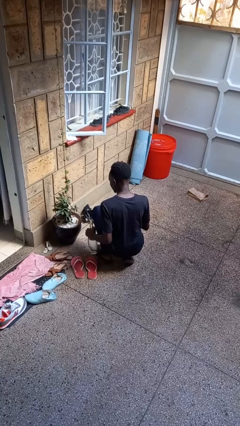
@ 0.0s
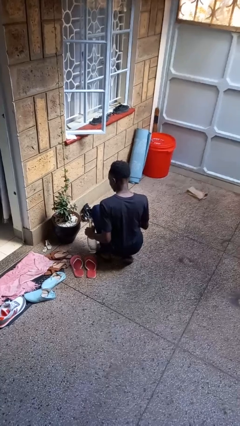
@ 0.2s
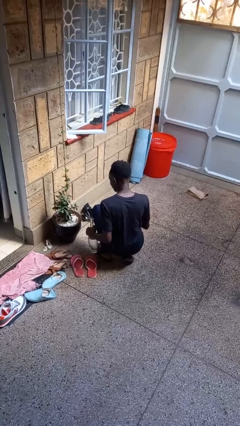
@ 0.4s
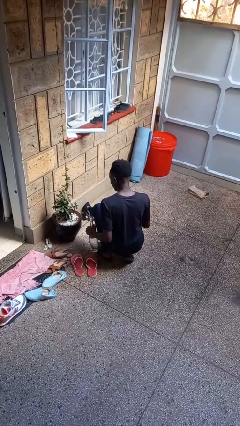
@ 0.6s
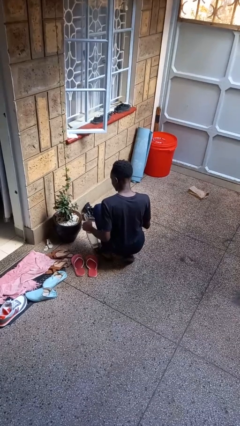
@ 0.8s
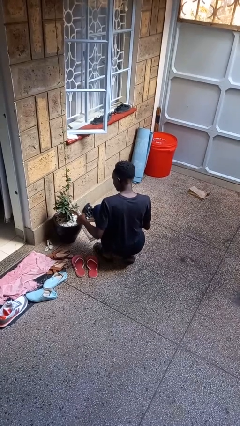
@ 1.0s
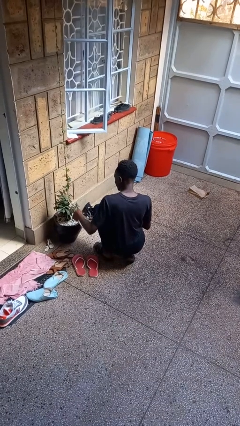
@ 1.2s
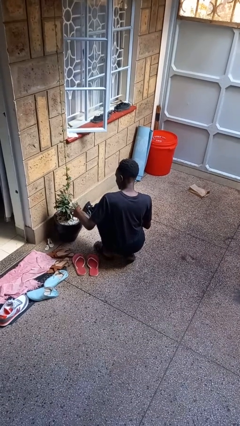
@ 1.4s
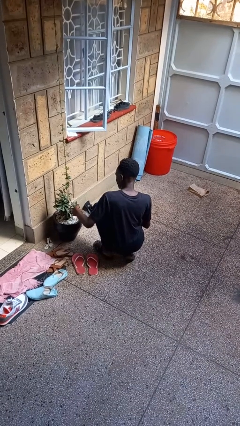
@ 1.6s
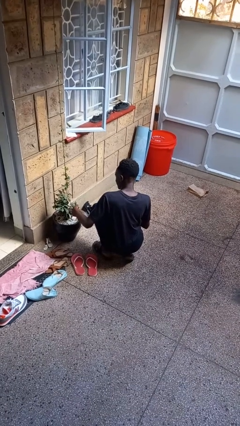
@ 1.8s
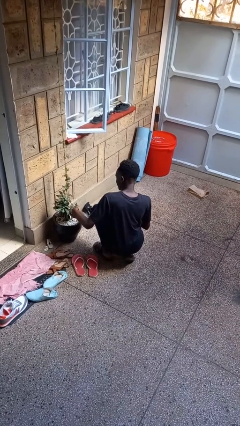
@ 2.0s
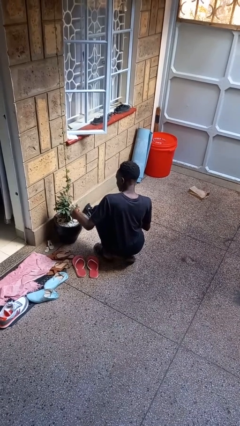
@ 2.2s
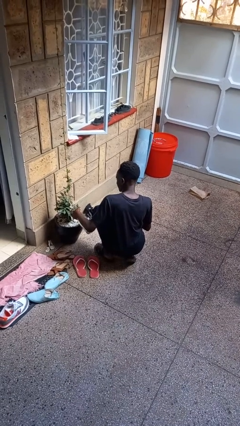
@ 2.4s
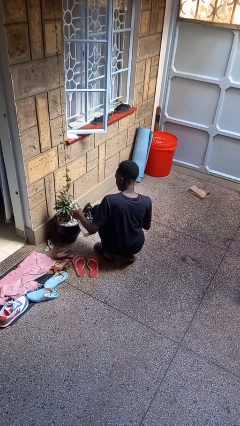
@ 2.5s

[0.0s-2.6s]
person waters houseplant

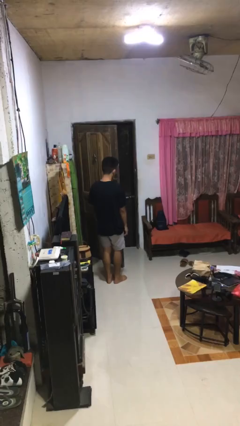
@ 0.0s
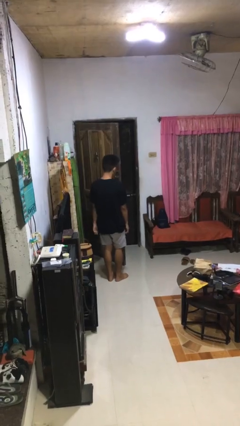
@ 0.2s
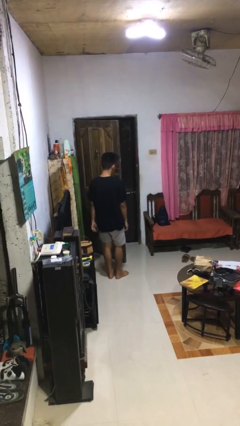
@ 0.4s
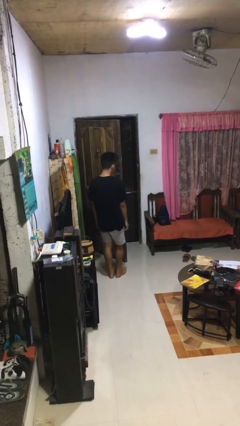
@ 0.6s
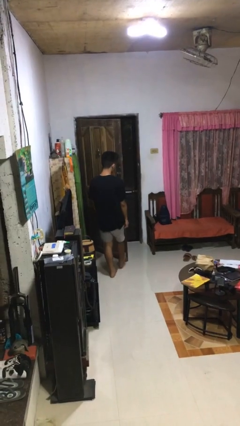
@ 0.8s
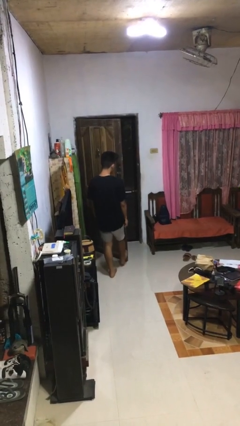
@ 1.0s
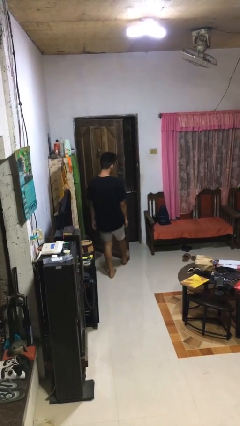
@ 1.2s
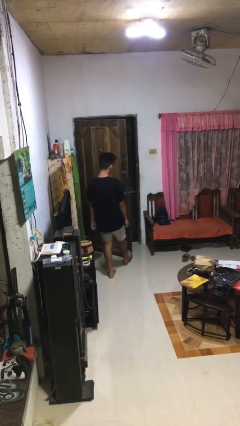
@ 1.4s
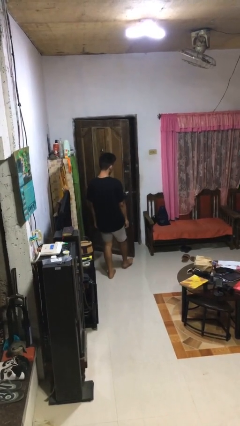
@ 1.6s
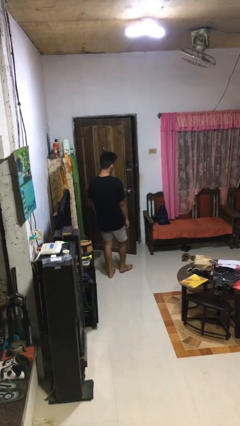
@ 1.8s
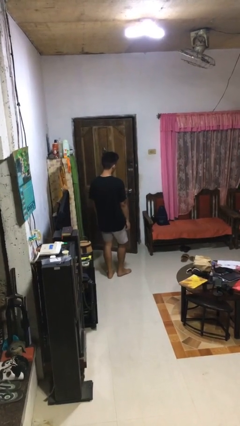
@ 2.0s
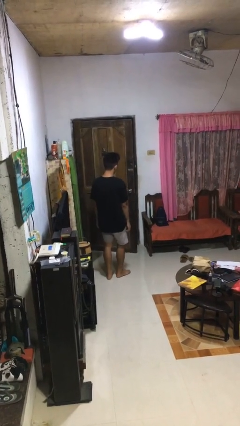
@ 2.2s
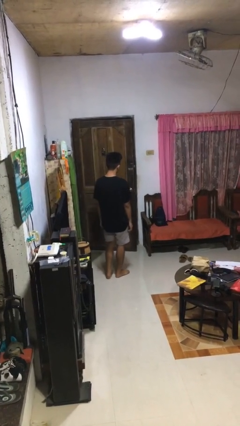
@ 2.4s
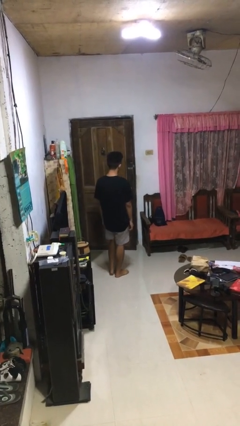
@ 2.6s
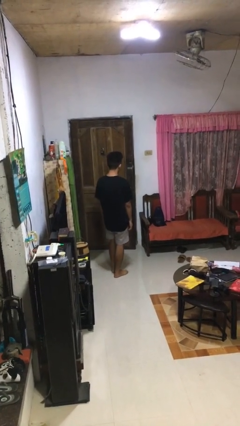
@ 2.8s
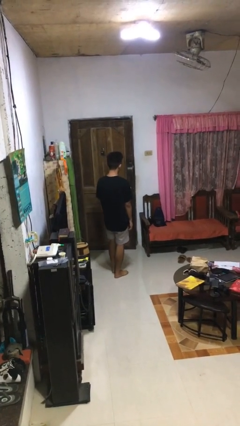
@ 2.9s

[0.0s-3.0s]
person closes door with foot

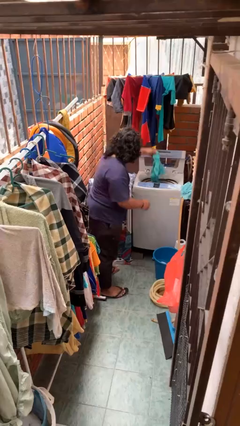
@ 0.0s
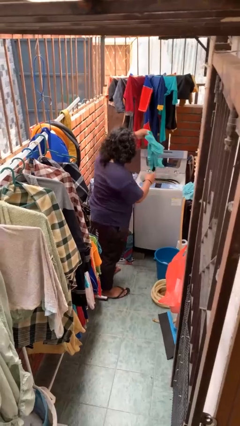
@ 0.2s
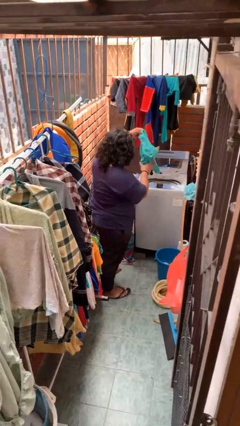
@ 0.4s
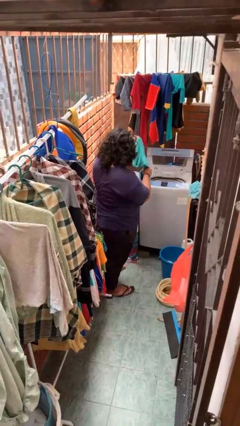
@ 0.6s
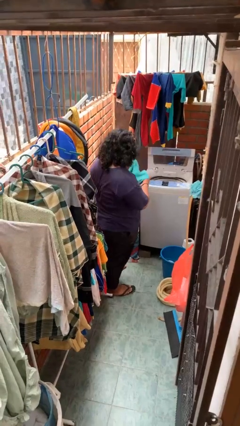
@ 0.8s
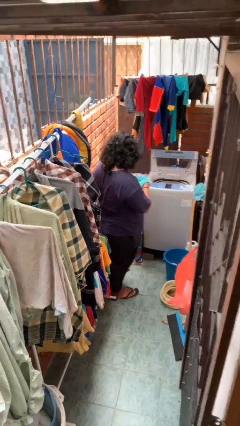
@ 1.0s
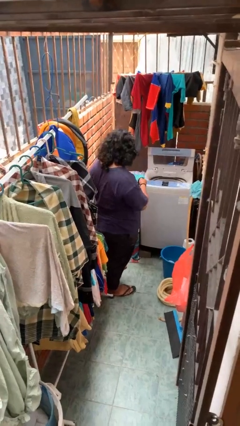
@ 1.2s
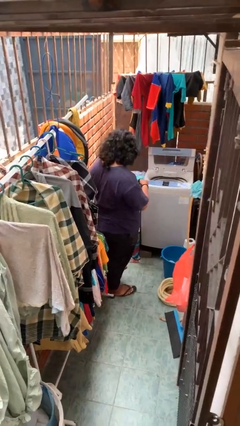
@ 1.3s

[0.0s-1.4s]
person unloads clotheswasher

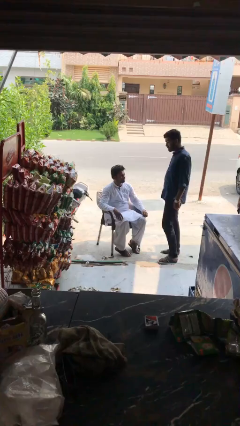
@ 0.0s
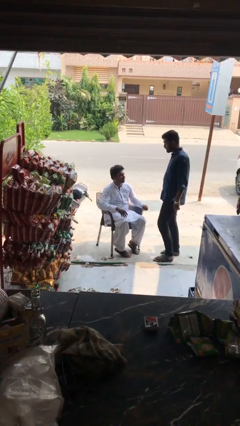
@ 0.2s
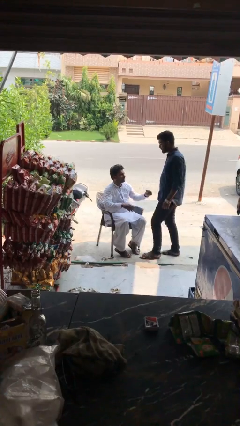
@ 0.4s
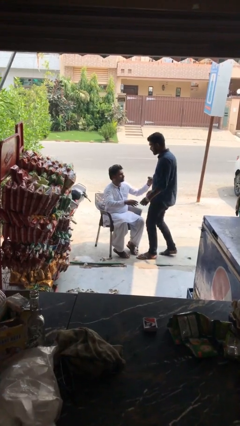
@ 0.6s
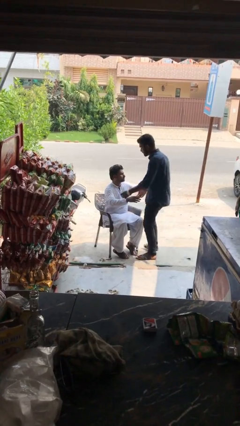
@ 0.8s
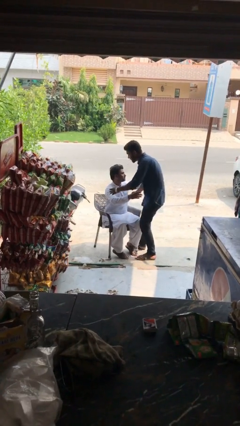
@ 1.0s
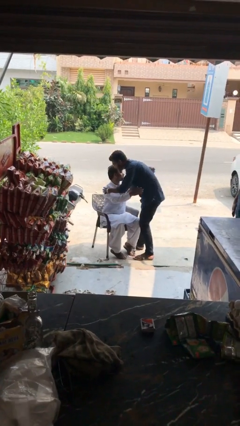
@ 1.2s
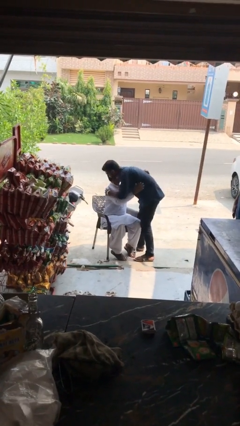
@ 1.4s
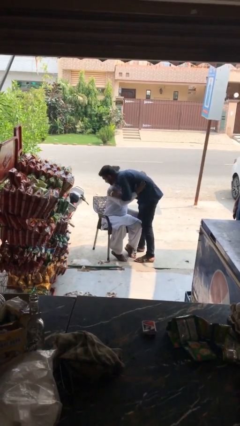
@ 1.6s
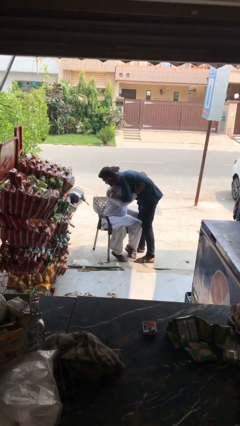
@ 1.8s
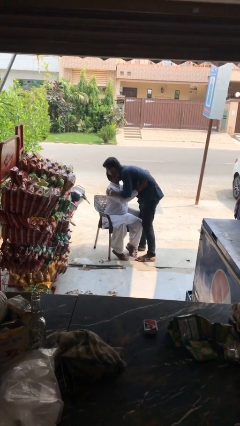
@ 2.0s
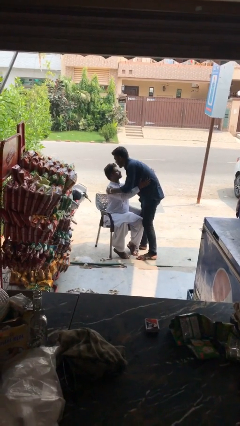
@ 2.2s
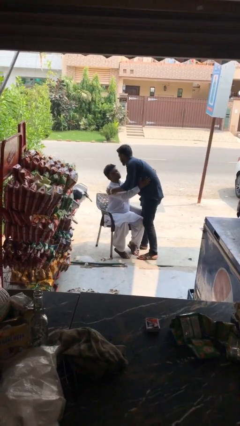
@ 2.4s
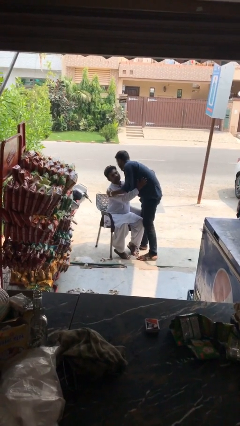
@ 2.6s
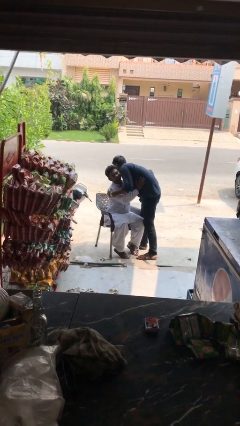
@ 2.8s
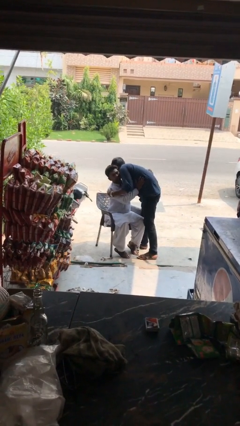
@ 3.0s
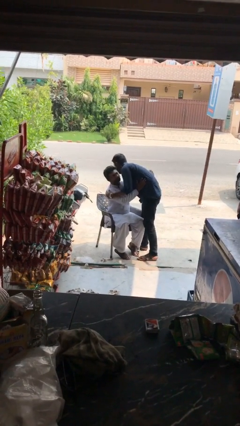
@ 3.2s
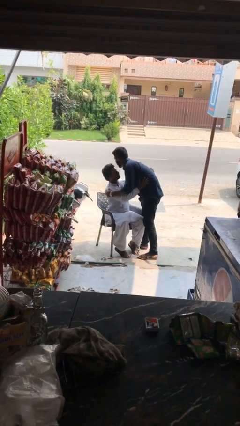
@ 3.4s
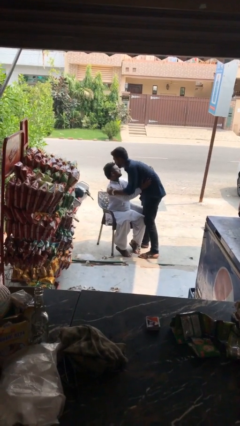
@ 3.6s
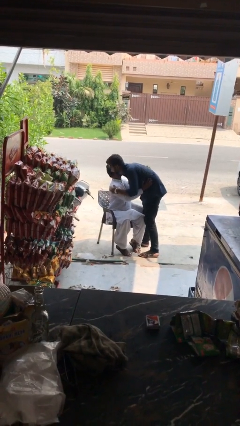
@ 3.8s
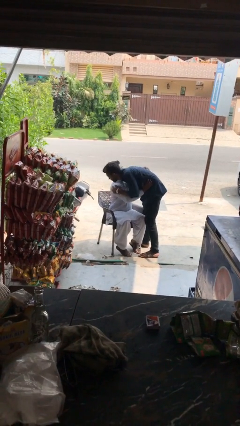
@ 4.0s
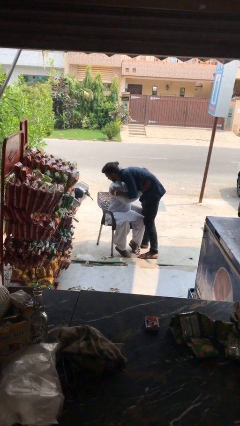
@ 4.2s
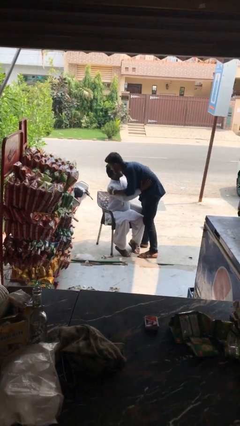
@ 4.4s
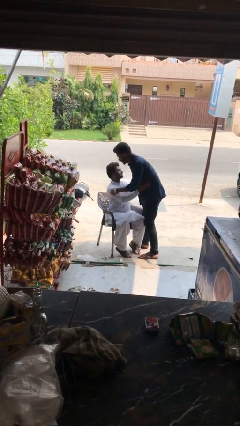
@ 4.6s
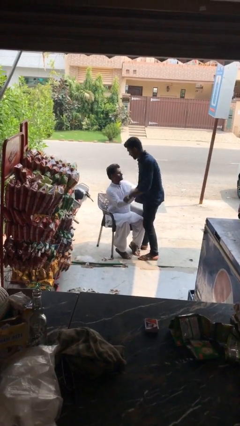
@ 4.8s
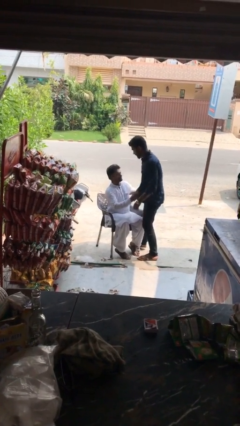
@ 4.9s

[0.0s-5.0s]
person embraces person

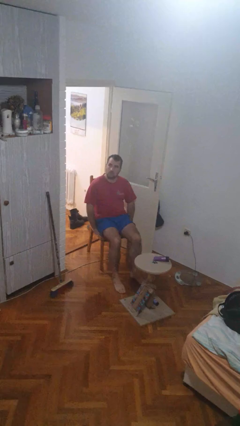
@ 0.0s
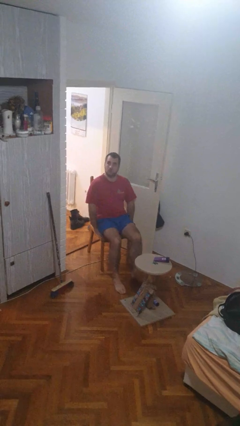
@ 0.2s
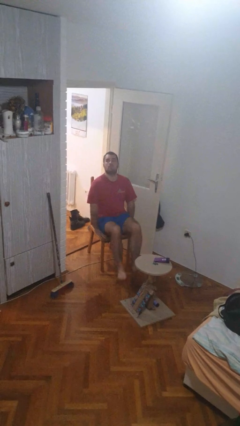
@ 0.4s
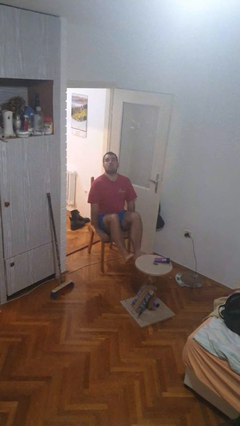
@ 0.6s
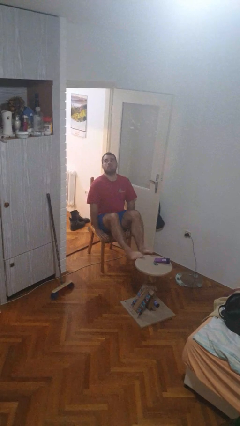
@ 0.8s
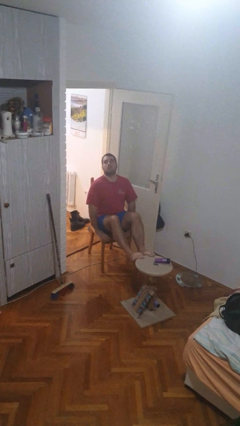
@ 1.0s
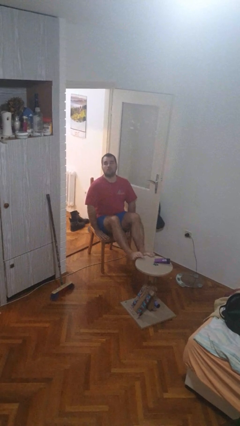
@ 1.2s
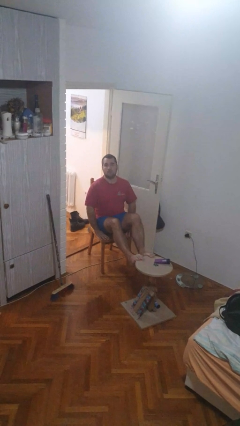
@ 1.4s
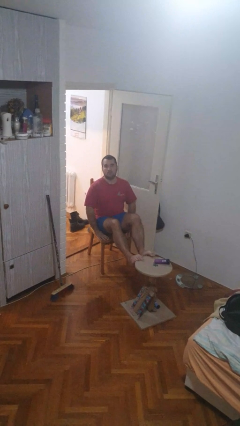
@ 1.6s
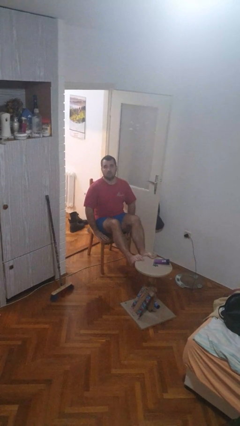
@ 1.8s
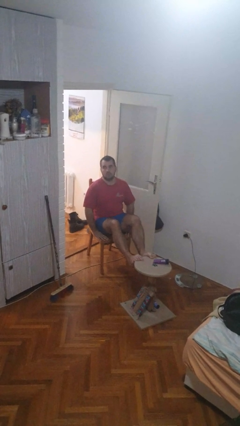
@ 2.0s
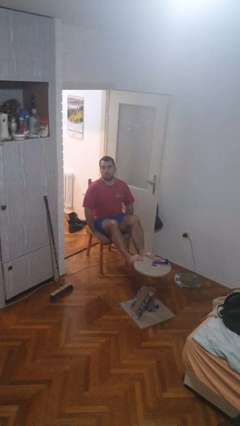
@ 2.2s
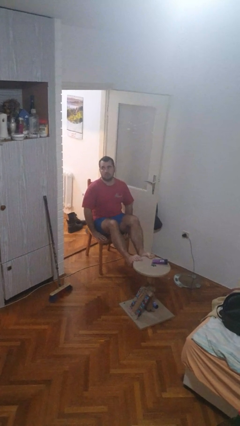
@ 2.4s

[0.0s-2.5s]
person puts feet up

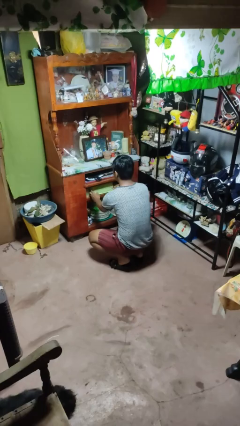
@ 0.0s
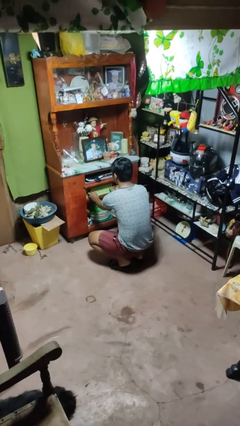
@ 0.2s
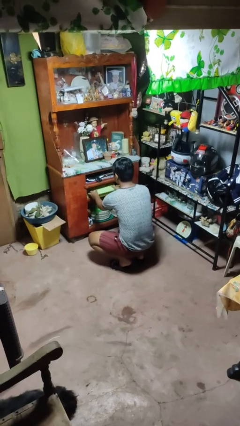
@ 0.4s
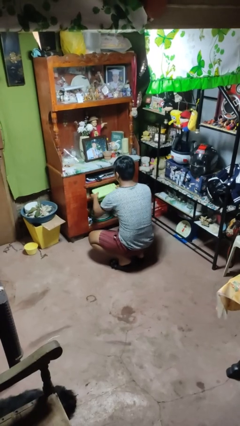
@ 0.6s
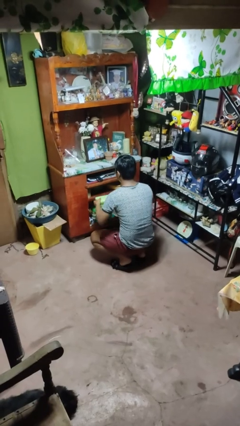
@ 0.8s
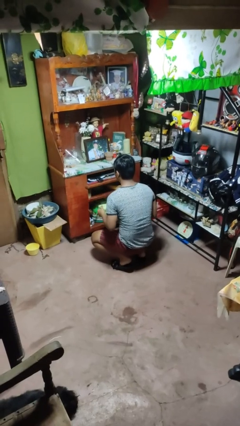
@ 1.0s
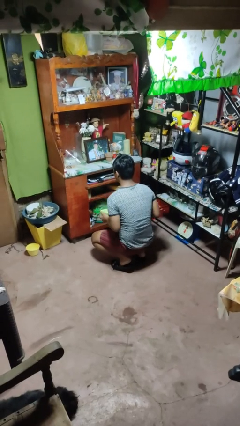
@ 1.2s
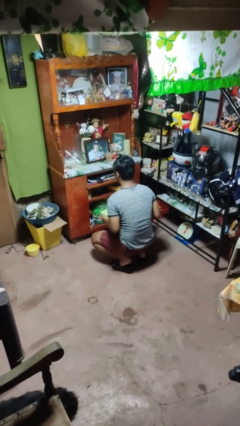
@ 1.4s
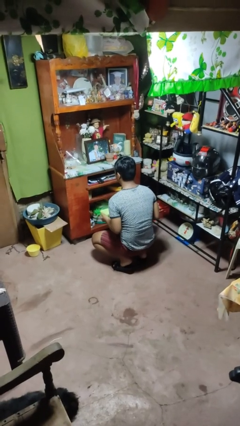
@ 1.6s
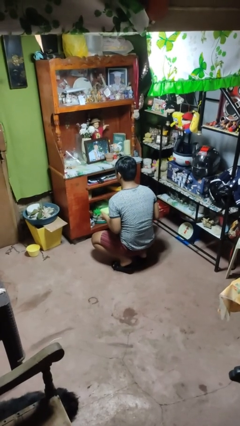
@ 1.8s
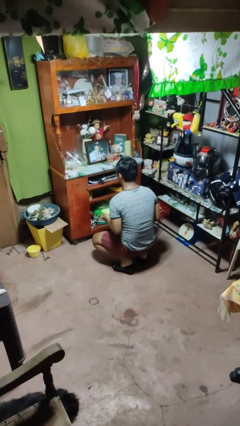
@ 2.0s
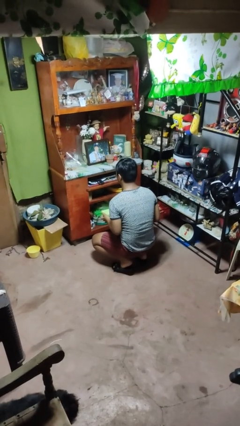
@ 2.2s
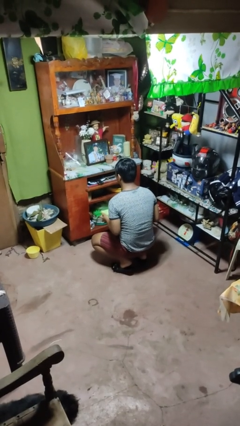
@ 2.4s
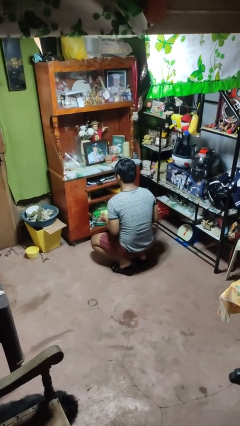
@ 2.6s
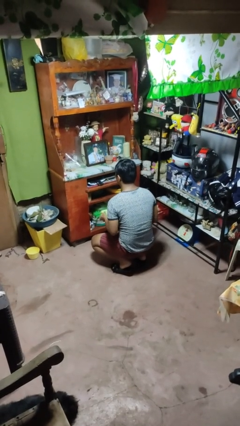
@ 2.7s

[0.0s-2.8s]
person picks up object from cabinet

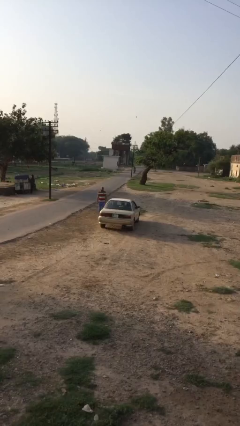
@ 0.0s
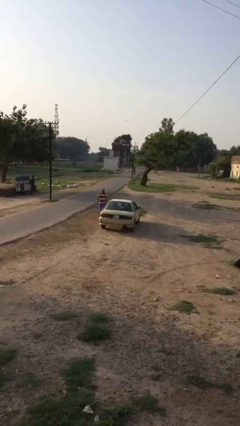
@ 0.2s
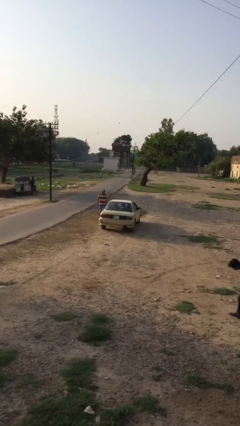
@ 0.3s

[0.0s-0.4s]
car picks up person
